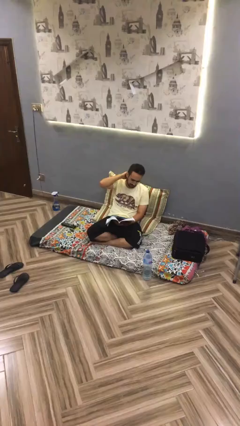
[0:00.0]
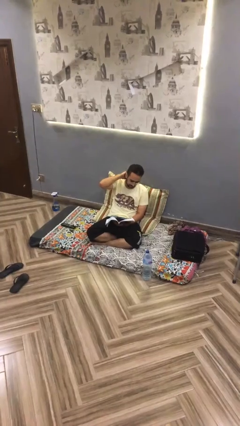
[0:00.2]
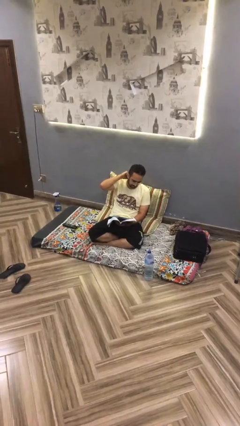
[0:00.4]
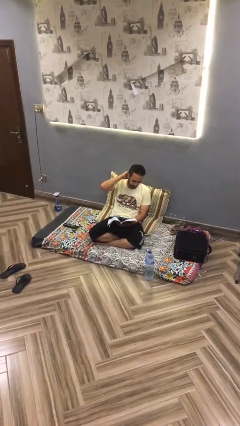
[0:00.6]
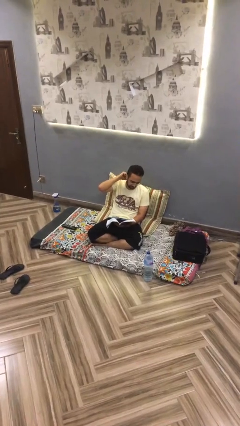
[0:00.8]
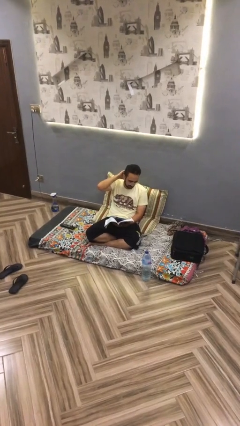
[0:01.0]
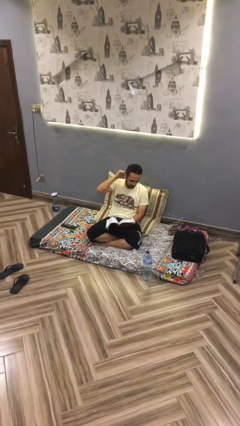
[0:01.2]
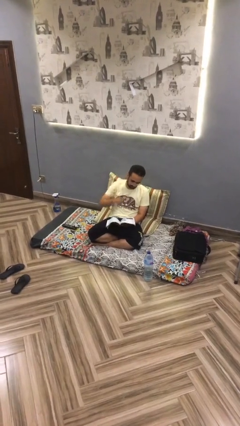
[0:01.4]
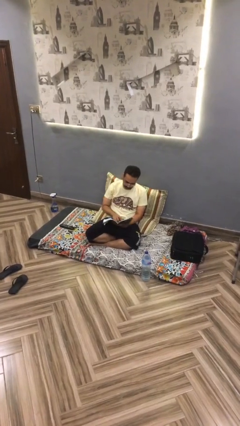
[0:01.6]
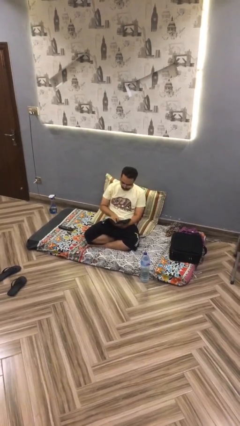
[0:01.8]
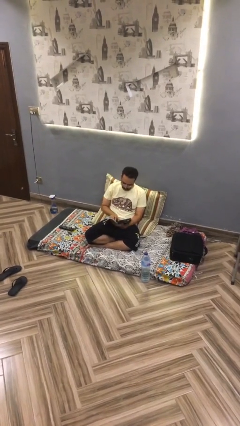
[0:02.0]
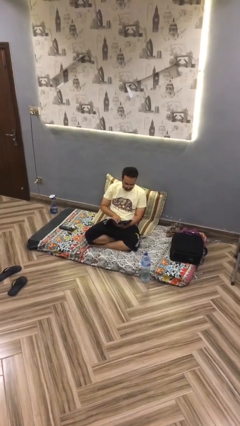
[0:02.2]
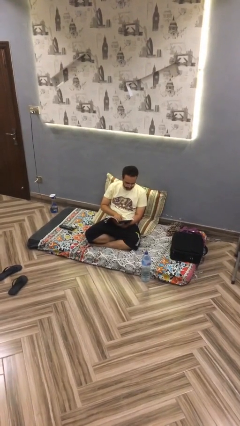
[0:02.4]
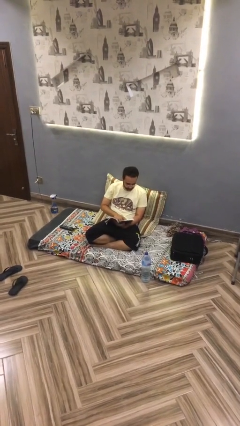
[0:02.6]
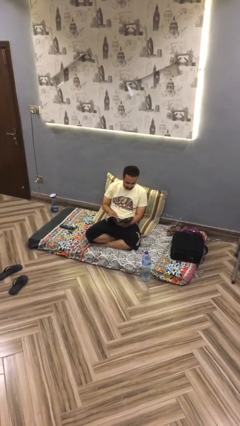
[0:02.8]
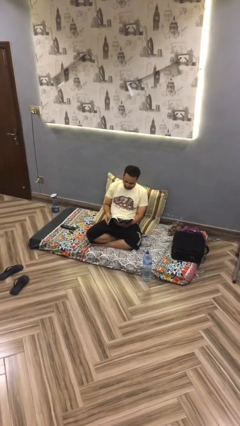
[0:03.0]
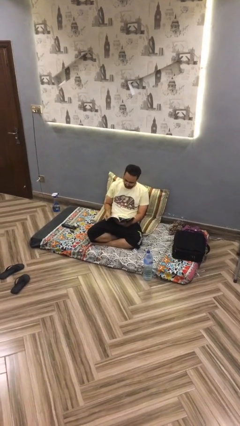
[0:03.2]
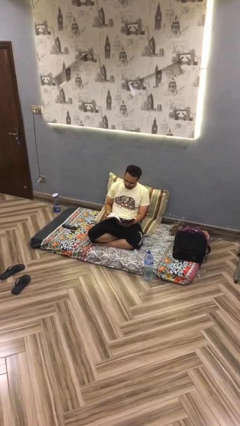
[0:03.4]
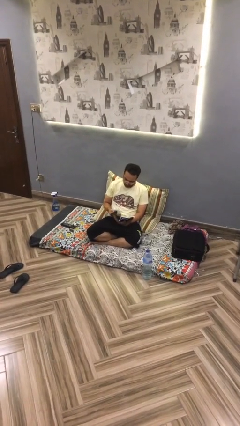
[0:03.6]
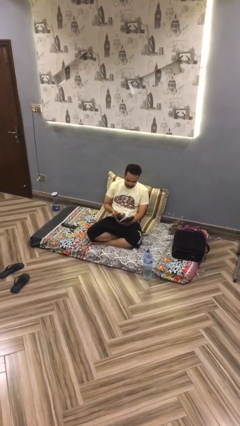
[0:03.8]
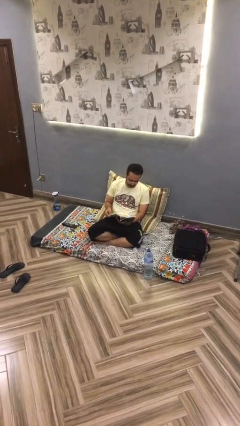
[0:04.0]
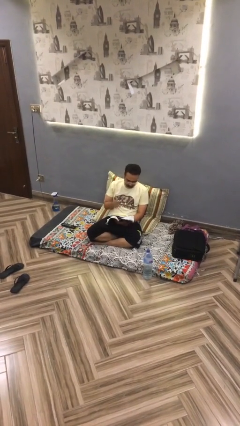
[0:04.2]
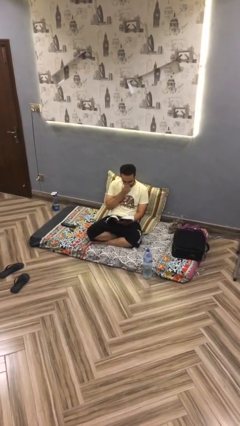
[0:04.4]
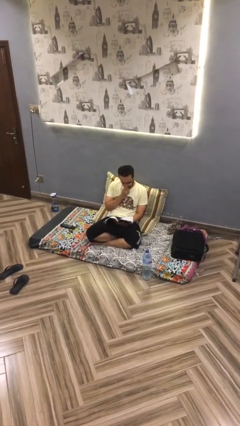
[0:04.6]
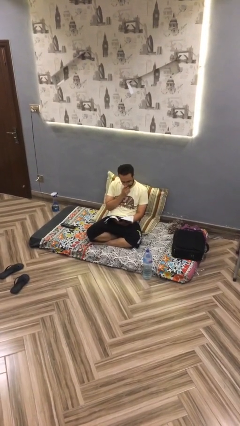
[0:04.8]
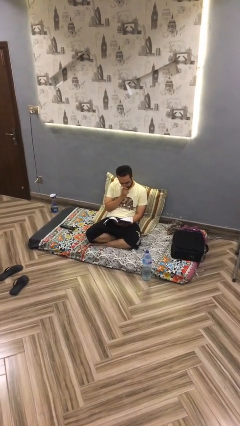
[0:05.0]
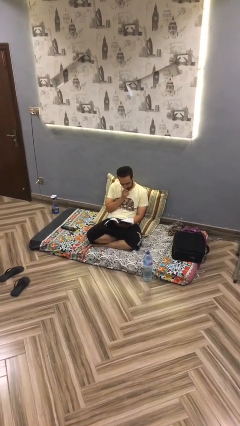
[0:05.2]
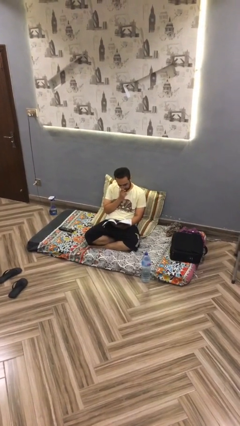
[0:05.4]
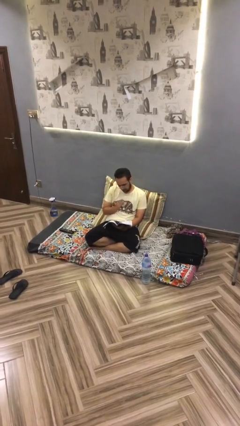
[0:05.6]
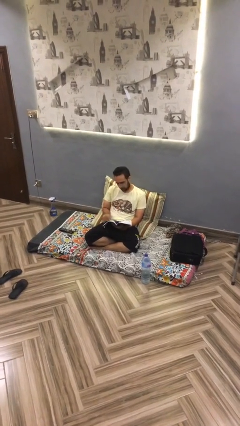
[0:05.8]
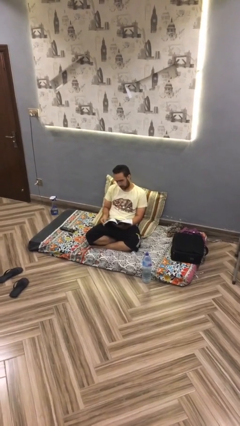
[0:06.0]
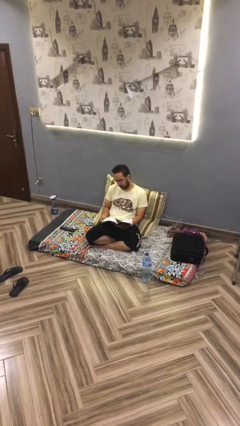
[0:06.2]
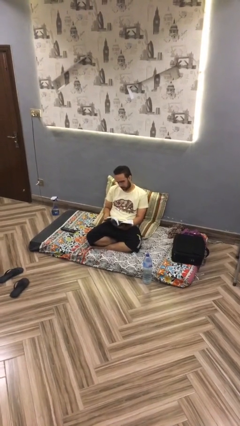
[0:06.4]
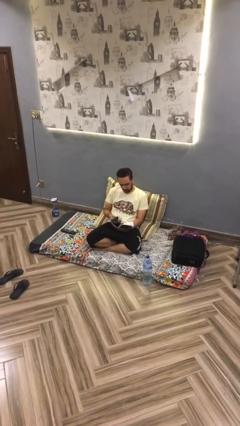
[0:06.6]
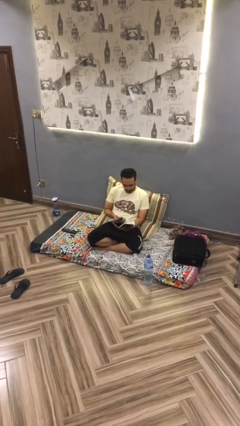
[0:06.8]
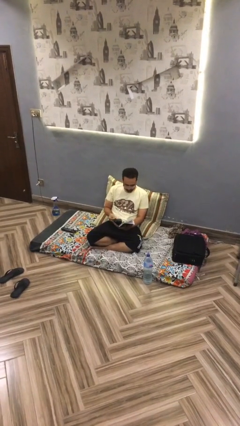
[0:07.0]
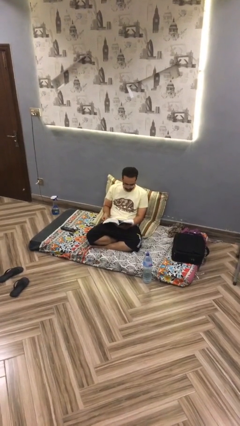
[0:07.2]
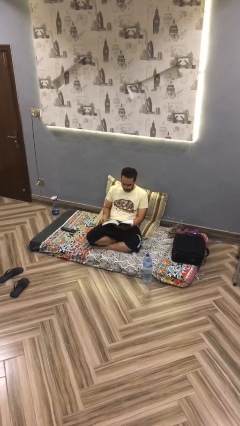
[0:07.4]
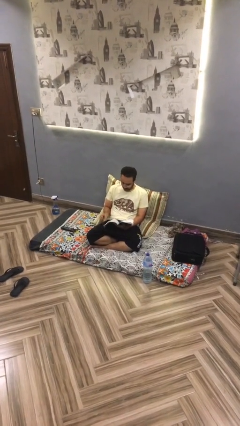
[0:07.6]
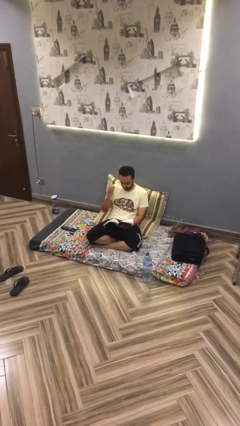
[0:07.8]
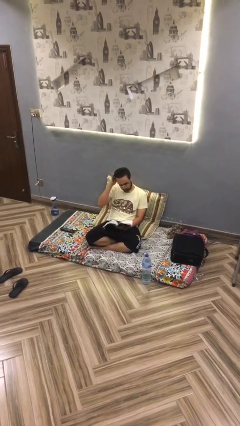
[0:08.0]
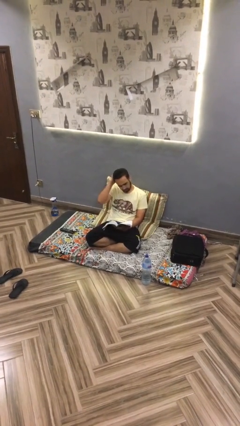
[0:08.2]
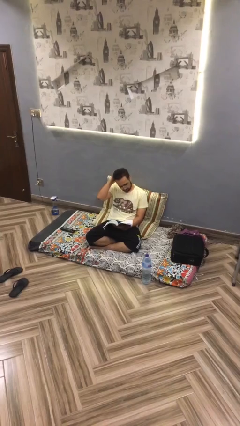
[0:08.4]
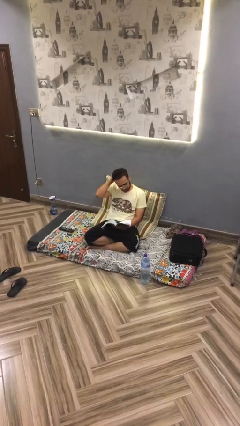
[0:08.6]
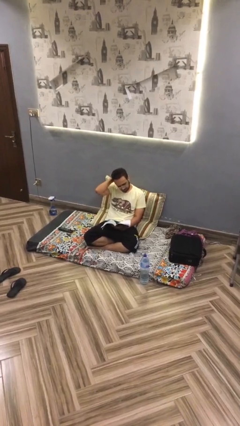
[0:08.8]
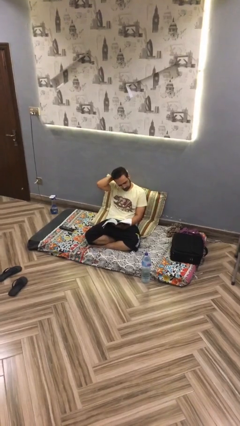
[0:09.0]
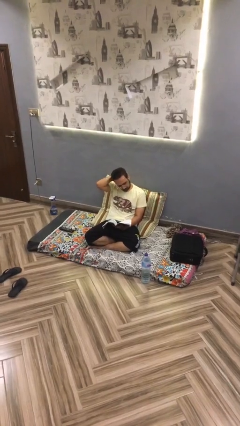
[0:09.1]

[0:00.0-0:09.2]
person reads document

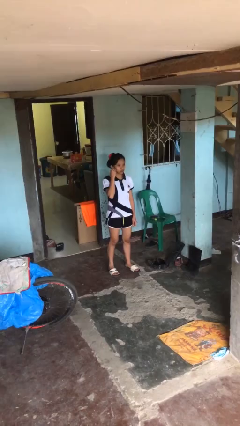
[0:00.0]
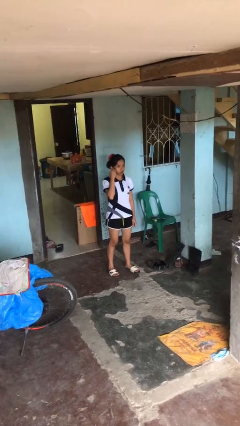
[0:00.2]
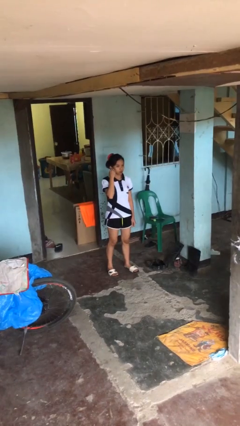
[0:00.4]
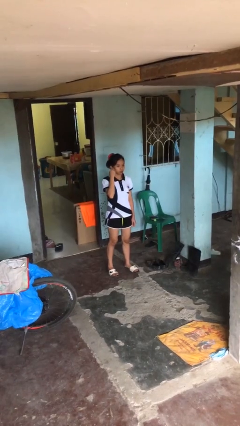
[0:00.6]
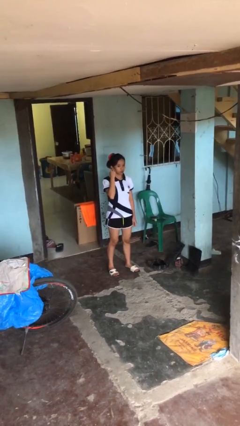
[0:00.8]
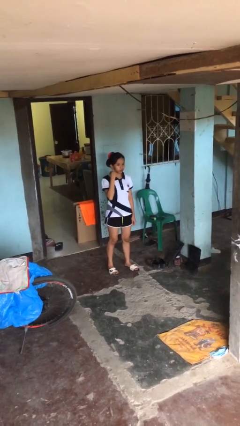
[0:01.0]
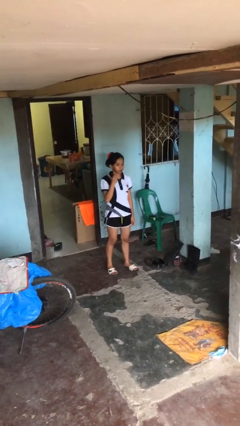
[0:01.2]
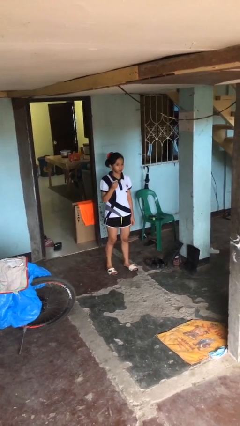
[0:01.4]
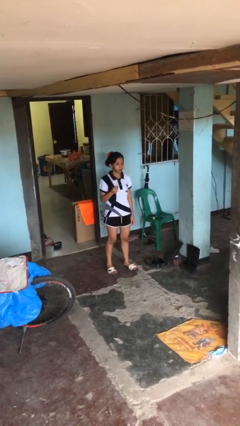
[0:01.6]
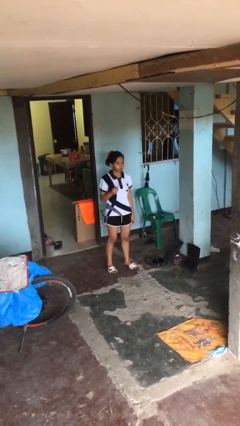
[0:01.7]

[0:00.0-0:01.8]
person takes off earrings

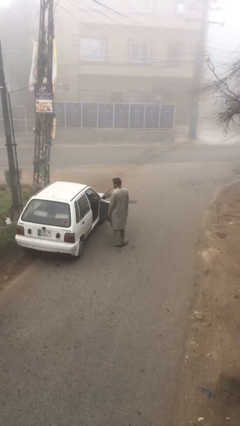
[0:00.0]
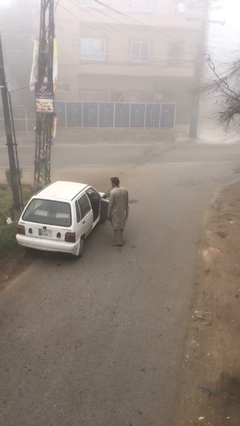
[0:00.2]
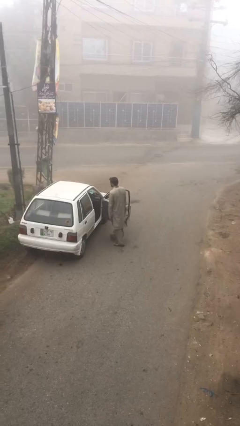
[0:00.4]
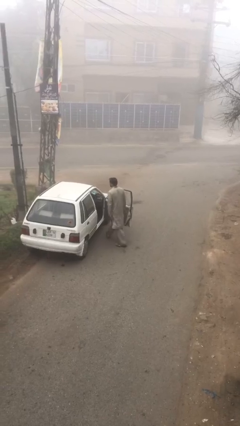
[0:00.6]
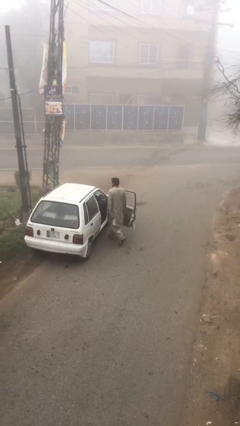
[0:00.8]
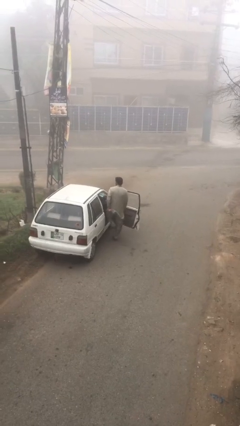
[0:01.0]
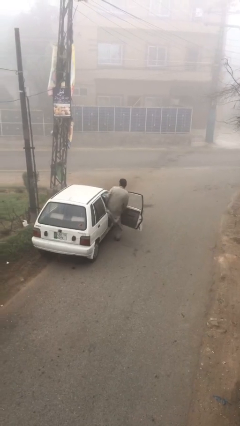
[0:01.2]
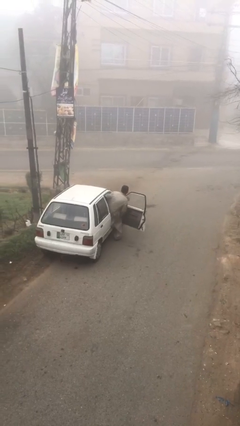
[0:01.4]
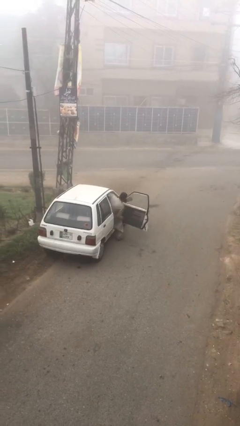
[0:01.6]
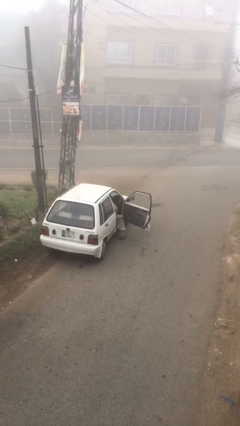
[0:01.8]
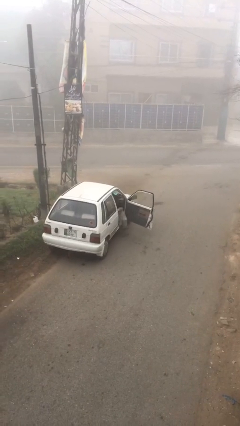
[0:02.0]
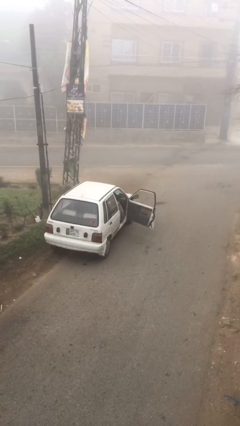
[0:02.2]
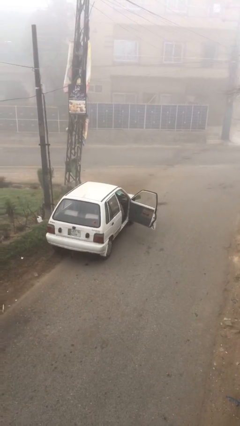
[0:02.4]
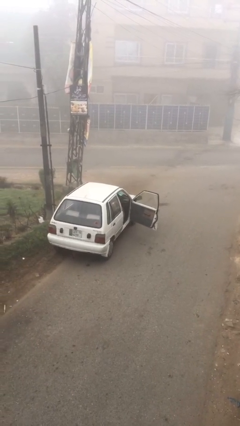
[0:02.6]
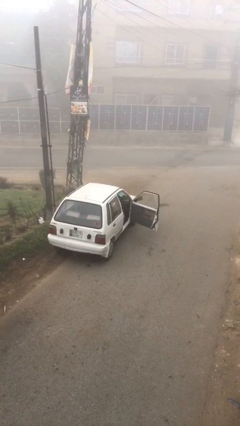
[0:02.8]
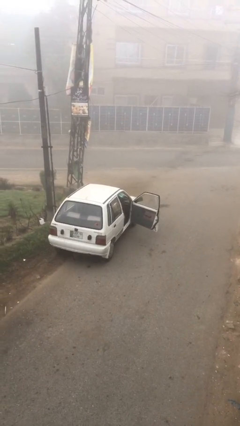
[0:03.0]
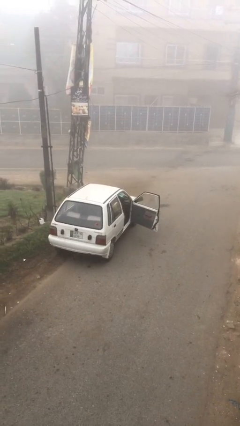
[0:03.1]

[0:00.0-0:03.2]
person enters car

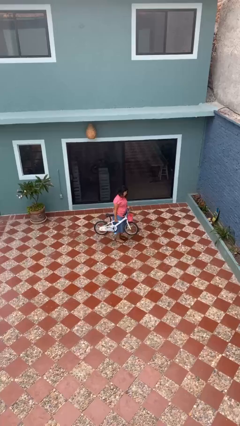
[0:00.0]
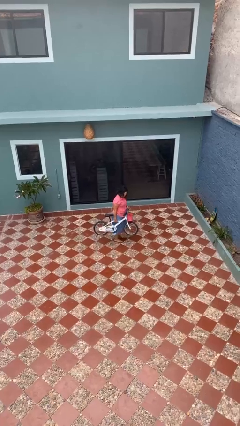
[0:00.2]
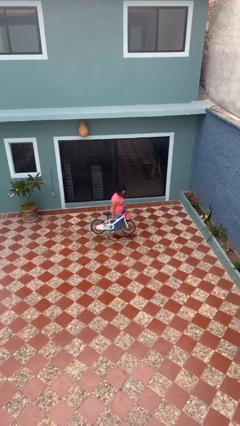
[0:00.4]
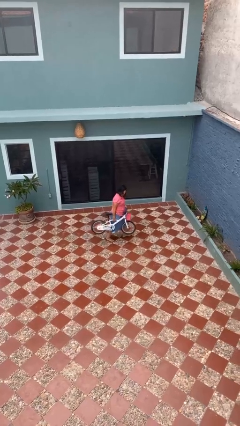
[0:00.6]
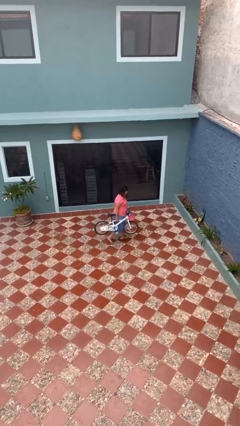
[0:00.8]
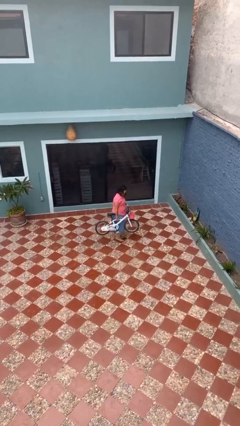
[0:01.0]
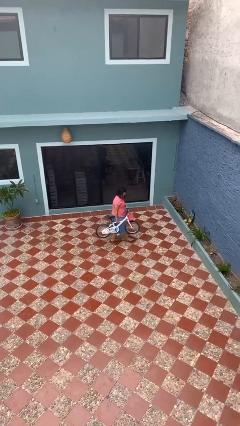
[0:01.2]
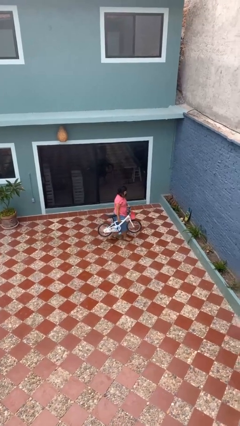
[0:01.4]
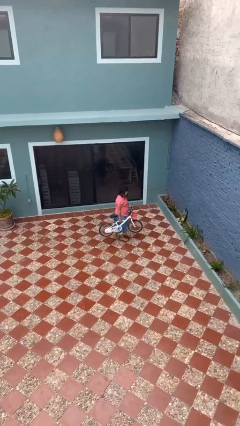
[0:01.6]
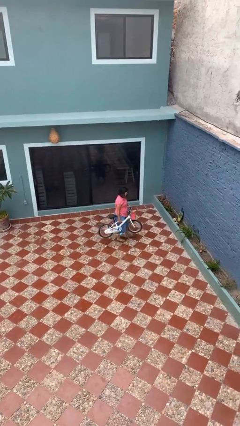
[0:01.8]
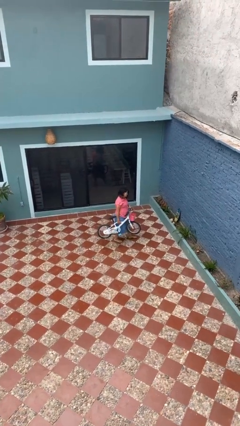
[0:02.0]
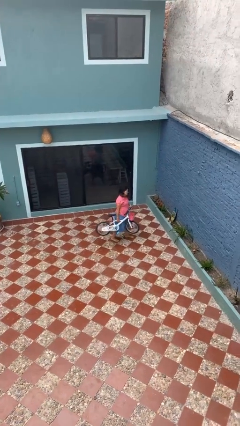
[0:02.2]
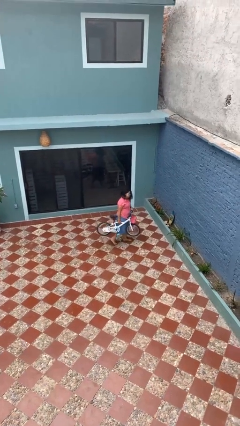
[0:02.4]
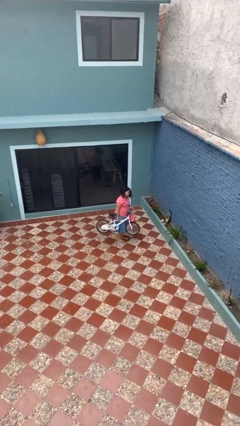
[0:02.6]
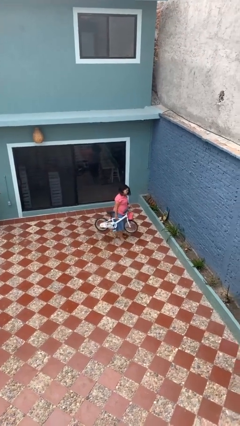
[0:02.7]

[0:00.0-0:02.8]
person carries bicycle

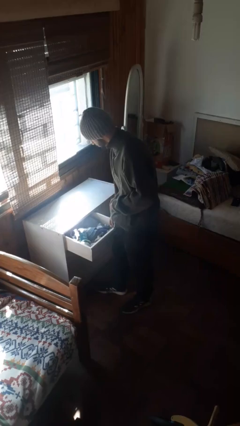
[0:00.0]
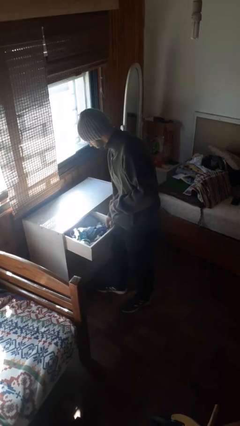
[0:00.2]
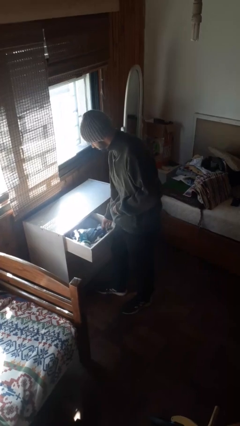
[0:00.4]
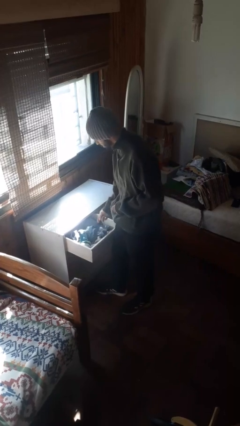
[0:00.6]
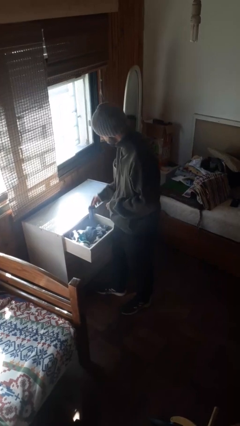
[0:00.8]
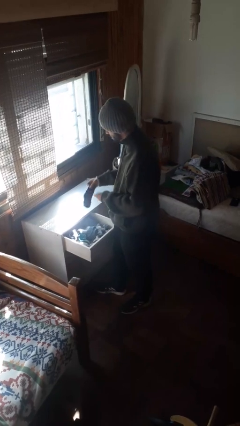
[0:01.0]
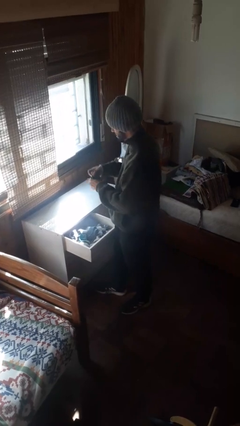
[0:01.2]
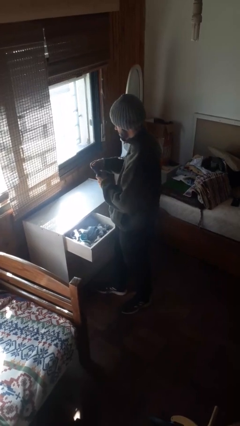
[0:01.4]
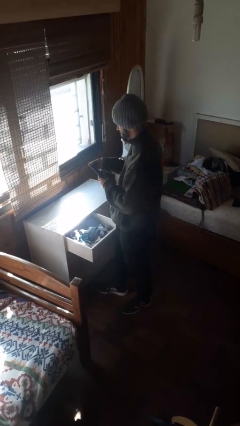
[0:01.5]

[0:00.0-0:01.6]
person takes clothes from dresser
